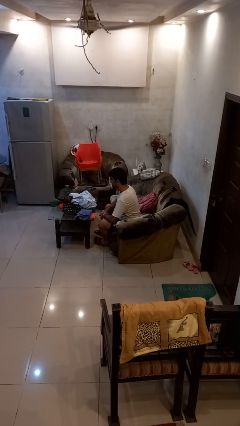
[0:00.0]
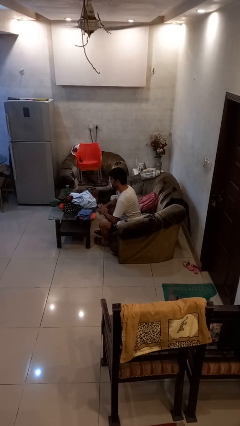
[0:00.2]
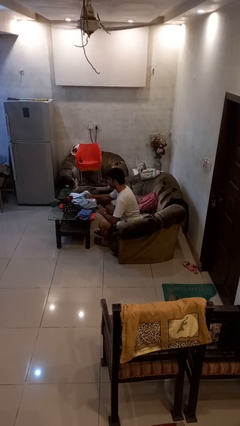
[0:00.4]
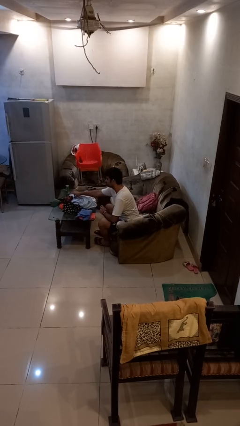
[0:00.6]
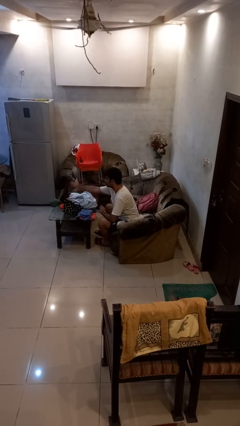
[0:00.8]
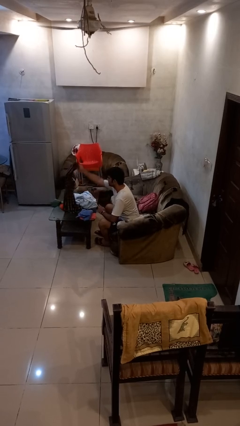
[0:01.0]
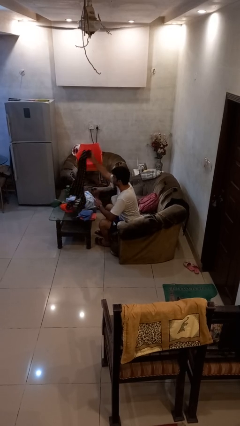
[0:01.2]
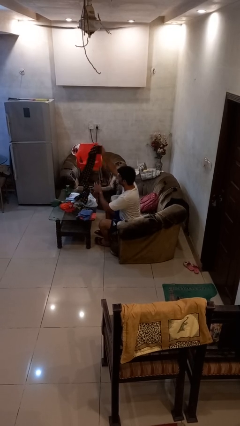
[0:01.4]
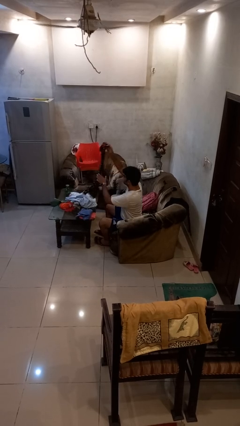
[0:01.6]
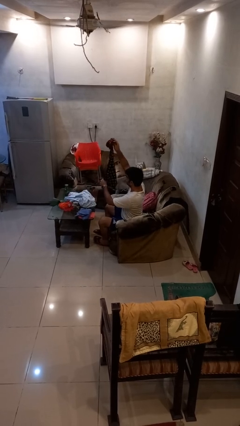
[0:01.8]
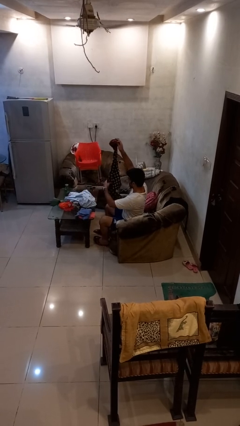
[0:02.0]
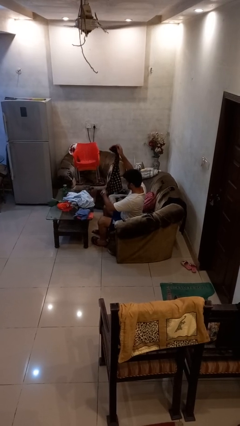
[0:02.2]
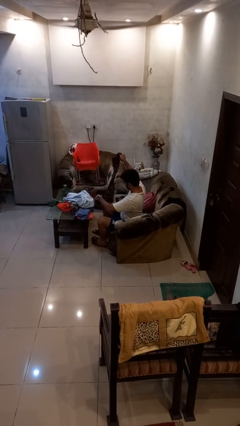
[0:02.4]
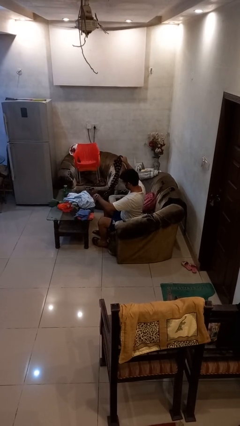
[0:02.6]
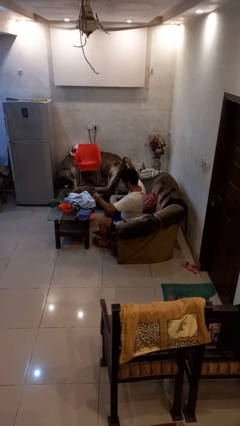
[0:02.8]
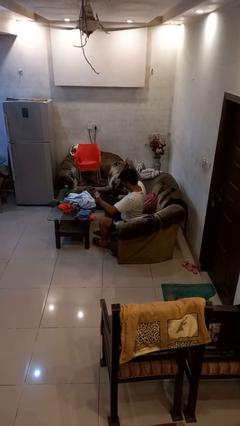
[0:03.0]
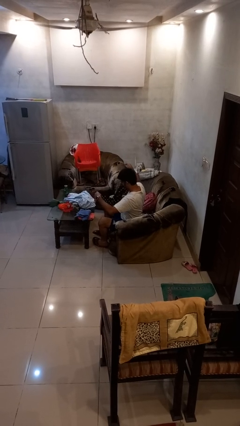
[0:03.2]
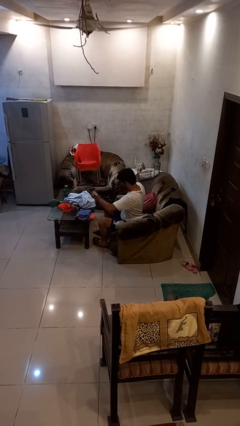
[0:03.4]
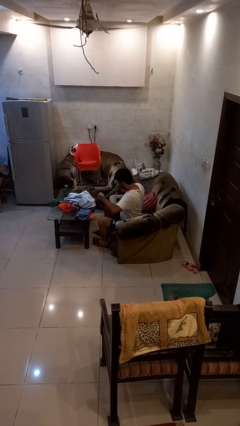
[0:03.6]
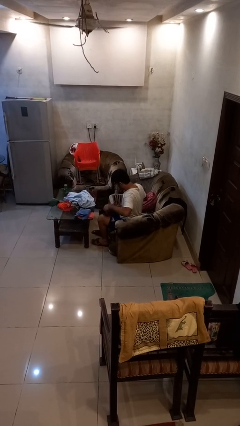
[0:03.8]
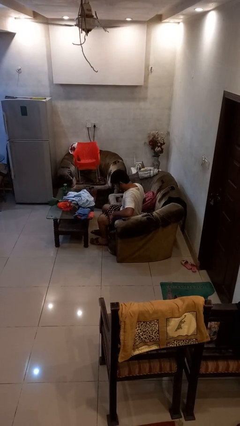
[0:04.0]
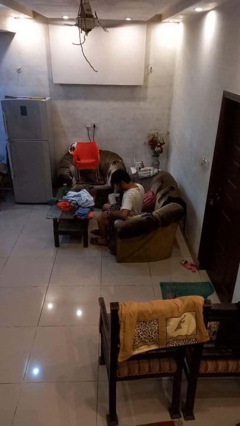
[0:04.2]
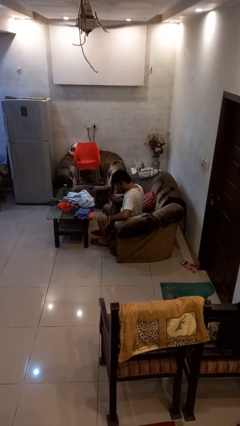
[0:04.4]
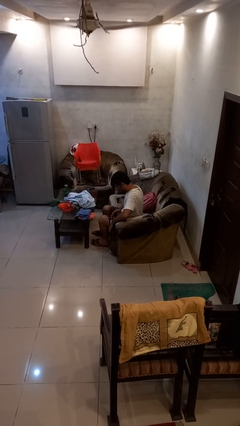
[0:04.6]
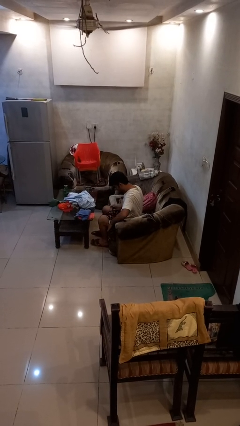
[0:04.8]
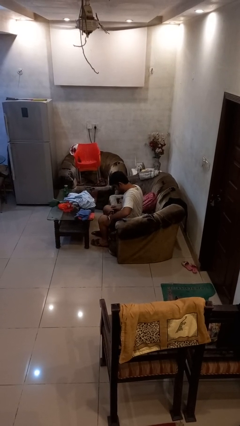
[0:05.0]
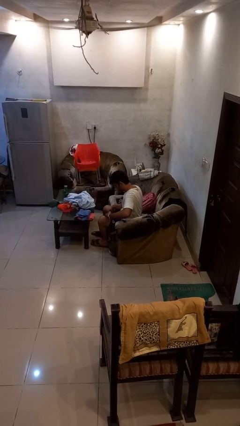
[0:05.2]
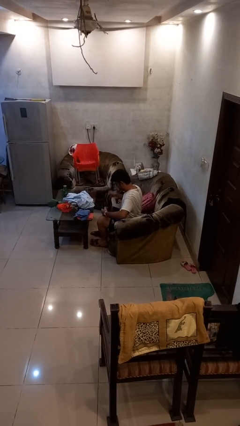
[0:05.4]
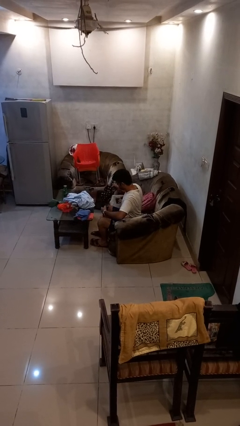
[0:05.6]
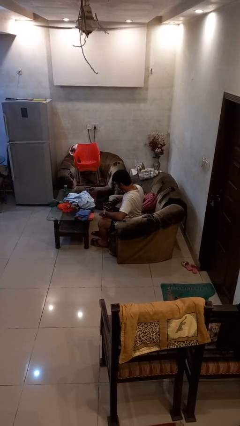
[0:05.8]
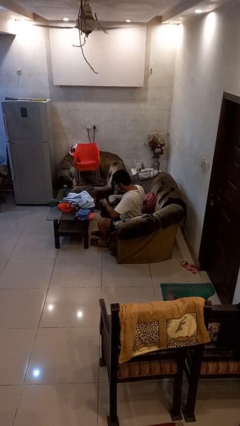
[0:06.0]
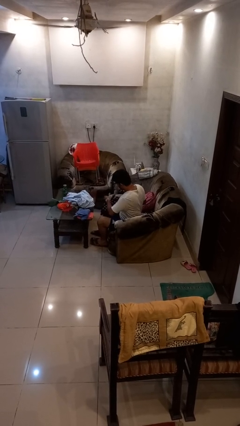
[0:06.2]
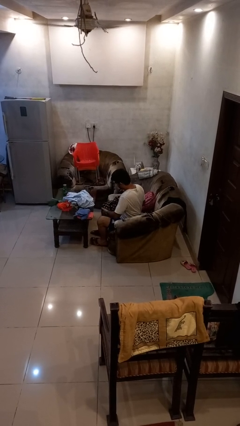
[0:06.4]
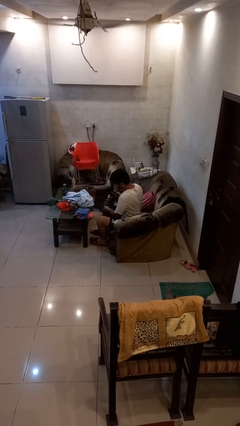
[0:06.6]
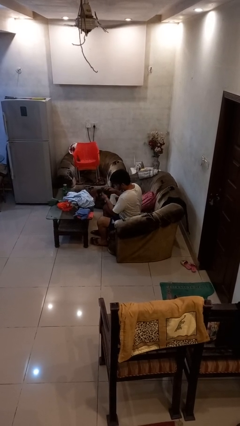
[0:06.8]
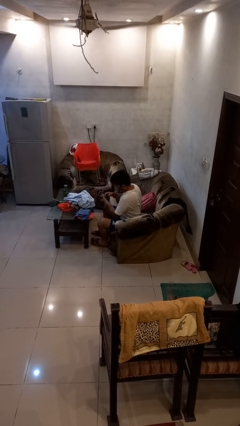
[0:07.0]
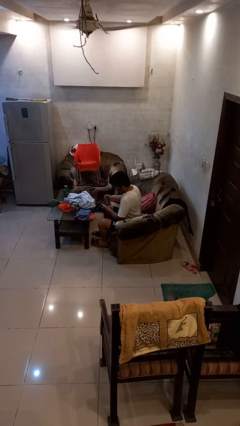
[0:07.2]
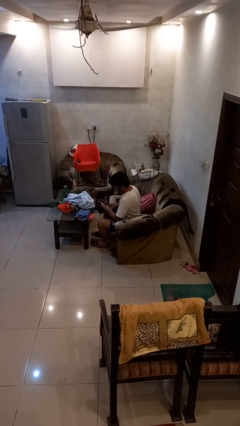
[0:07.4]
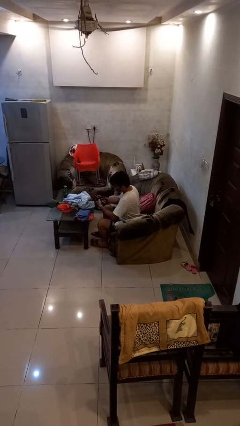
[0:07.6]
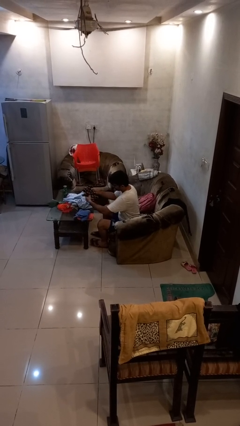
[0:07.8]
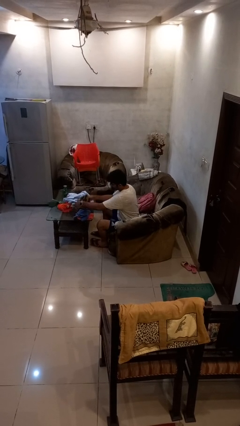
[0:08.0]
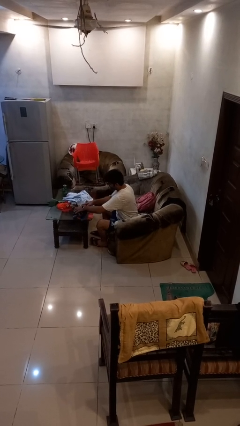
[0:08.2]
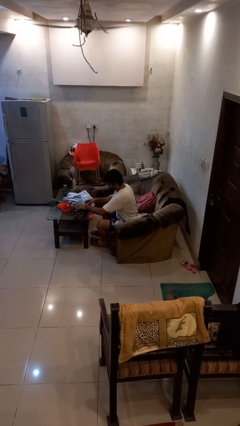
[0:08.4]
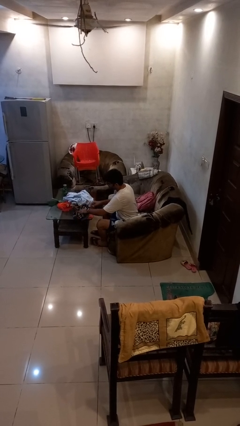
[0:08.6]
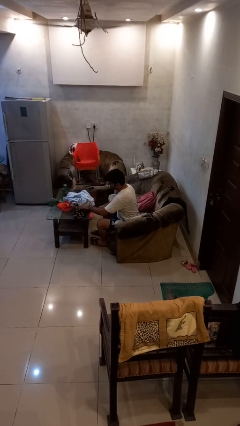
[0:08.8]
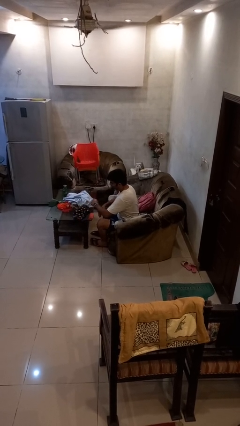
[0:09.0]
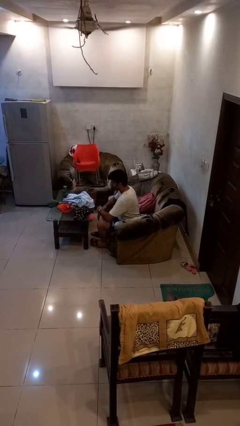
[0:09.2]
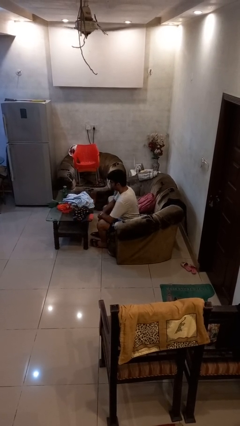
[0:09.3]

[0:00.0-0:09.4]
person folds shirt

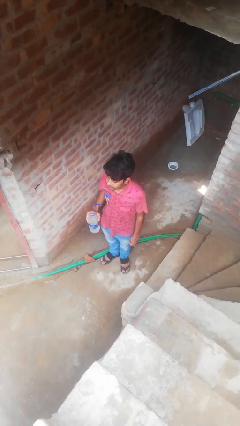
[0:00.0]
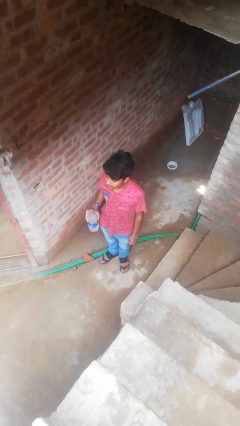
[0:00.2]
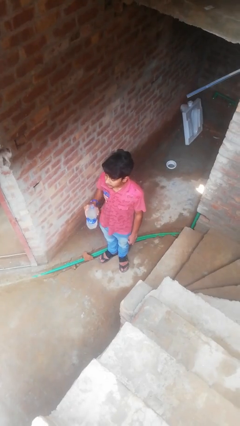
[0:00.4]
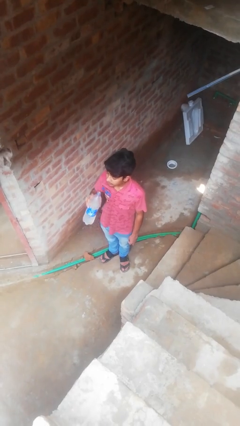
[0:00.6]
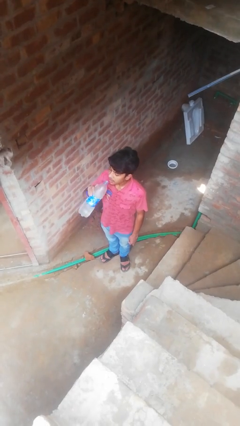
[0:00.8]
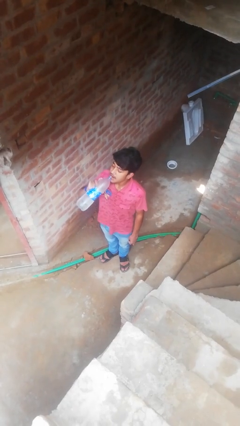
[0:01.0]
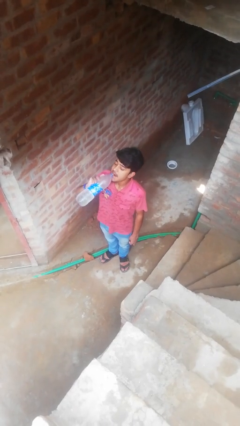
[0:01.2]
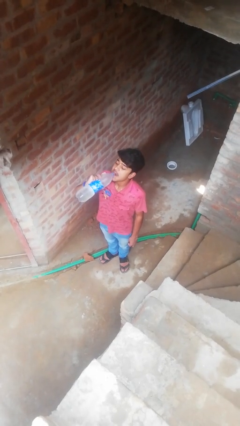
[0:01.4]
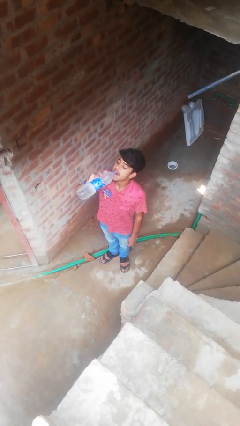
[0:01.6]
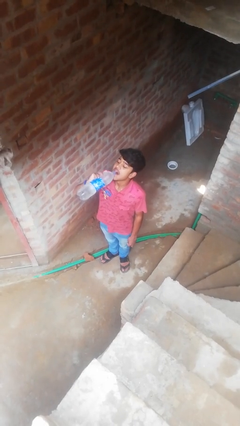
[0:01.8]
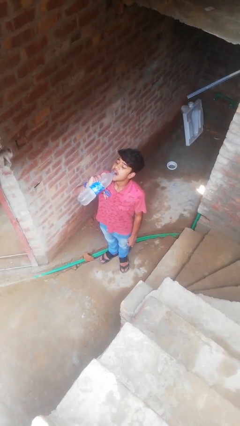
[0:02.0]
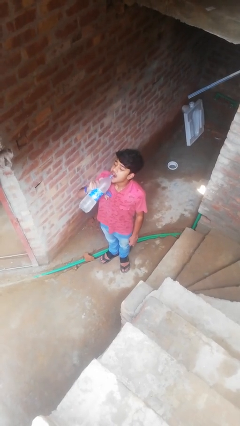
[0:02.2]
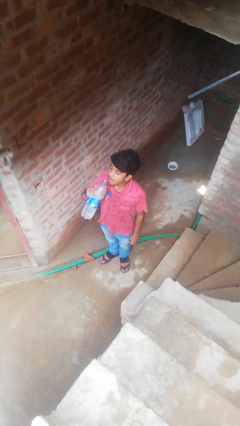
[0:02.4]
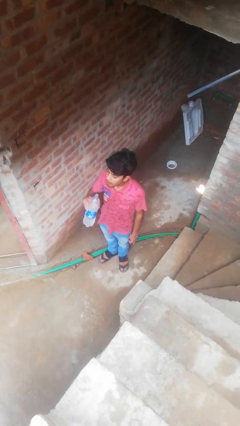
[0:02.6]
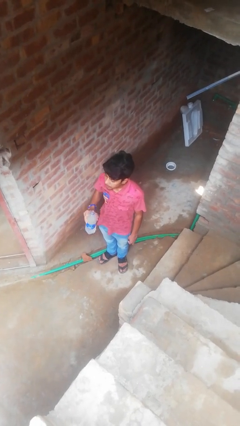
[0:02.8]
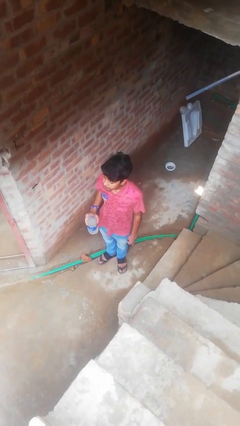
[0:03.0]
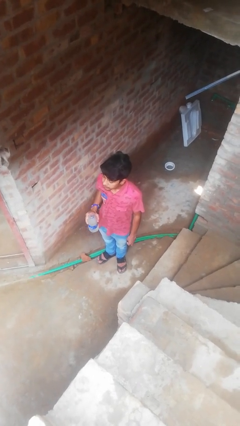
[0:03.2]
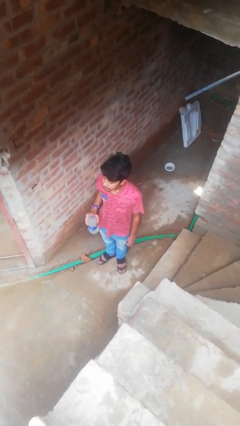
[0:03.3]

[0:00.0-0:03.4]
person drinks from bottle

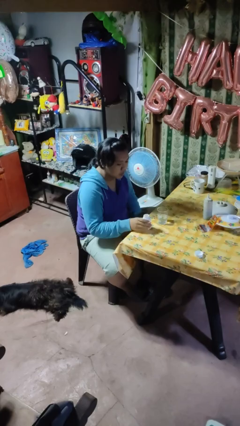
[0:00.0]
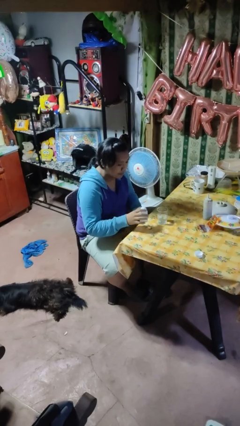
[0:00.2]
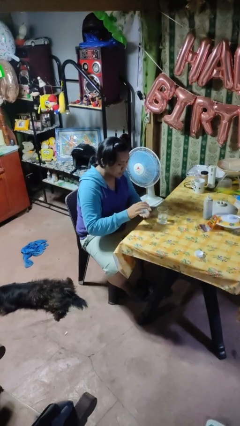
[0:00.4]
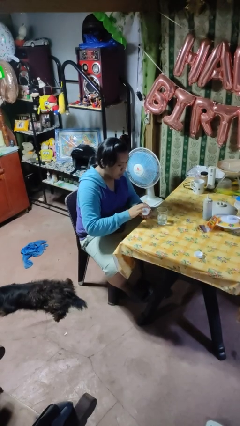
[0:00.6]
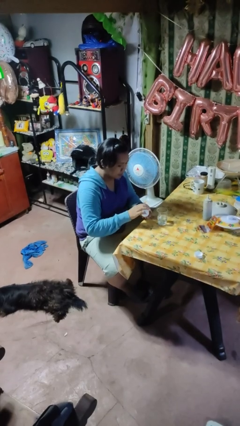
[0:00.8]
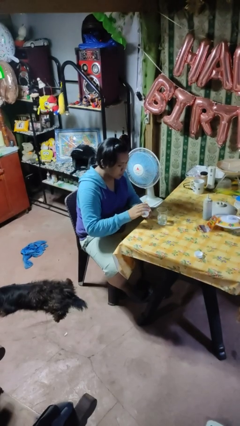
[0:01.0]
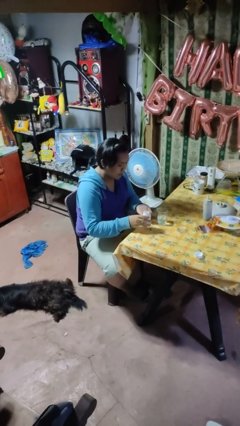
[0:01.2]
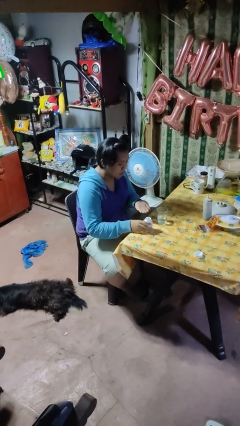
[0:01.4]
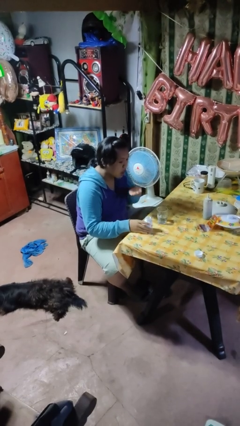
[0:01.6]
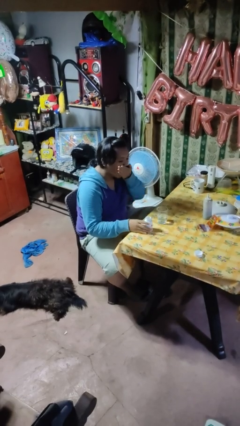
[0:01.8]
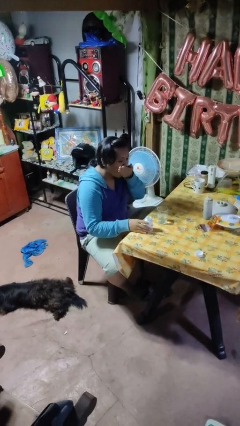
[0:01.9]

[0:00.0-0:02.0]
person takes medicine pills

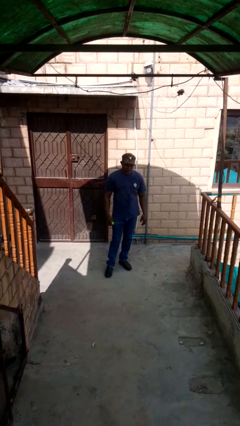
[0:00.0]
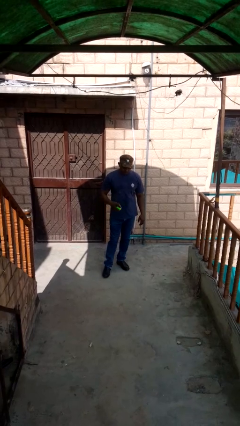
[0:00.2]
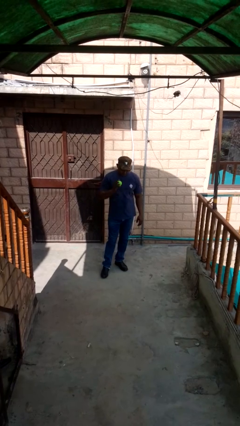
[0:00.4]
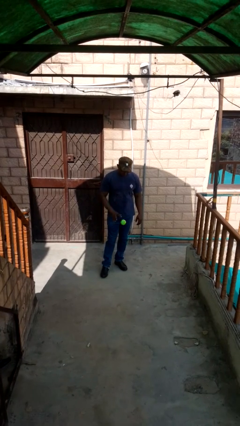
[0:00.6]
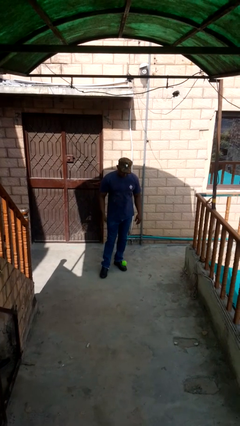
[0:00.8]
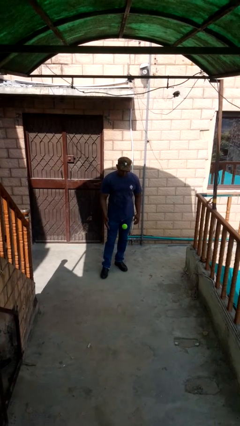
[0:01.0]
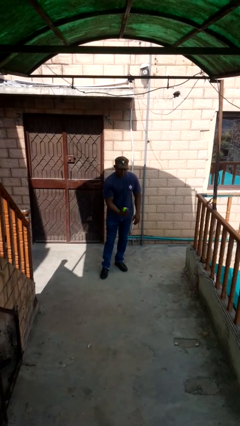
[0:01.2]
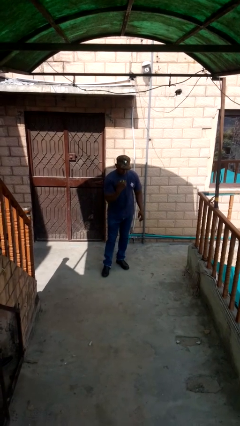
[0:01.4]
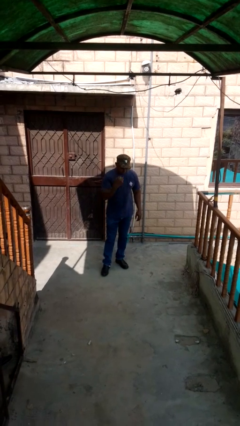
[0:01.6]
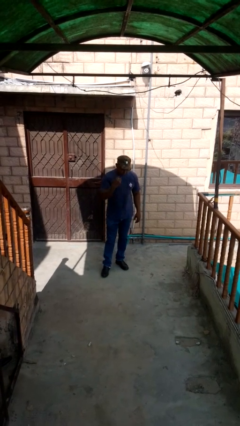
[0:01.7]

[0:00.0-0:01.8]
person bounces ball on floor

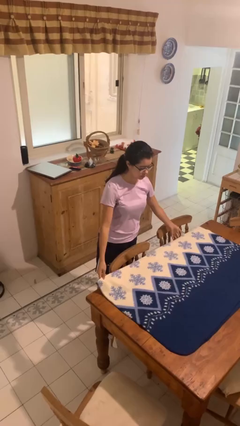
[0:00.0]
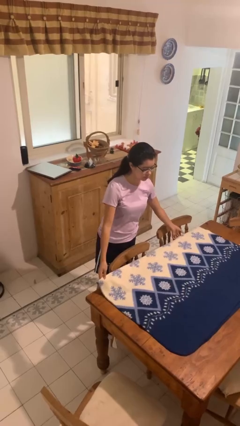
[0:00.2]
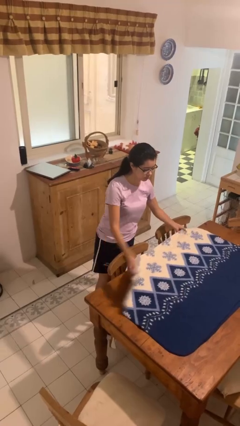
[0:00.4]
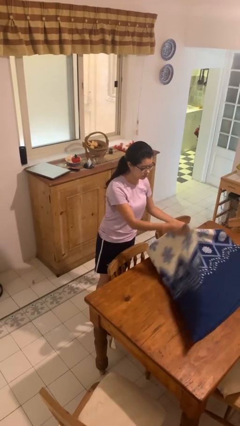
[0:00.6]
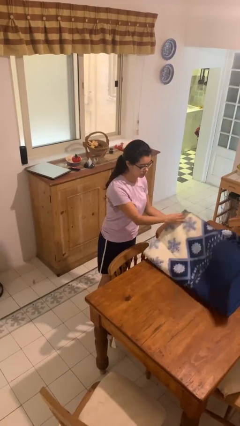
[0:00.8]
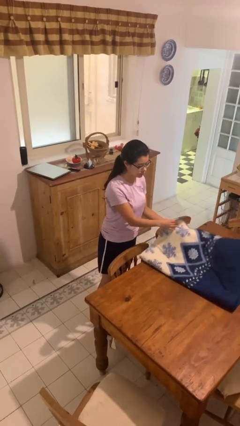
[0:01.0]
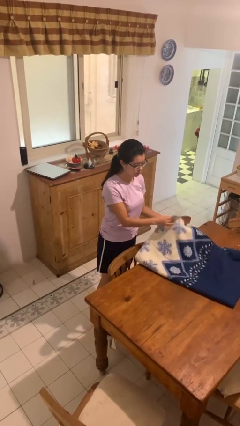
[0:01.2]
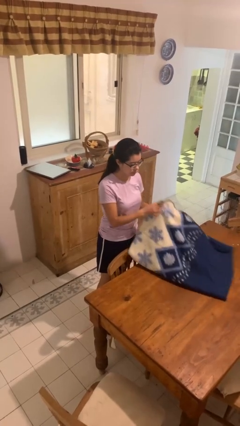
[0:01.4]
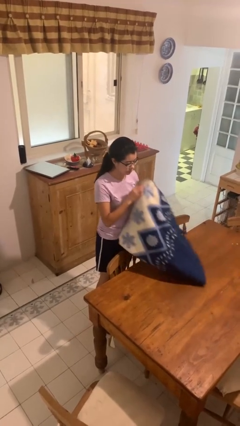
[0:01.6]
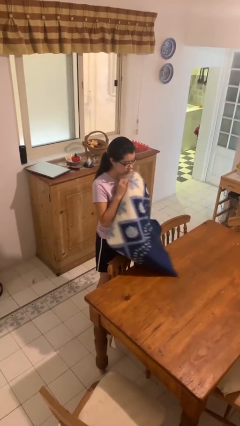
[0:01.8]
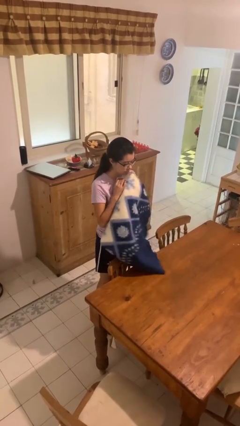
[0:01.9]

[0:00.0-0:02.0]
person folds tablecloth
